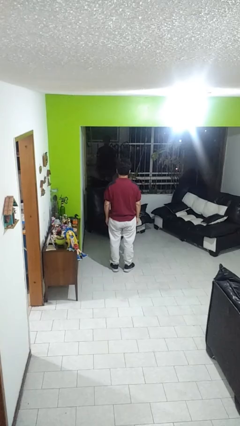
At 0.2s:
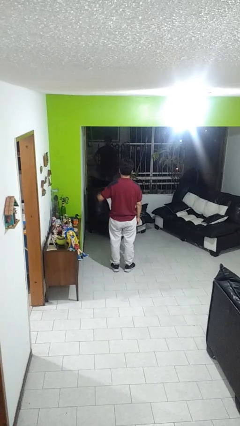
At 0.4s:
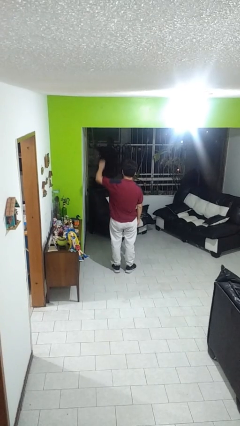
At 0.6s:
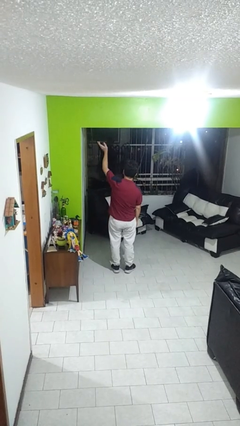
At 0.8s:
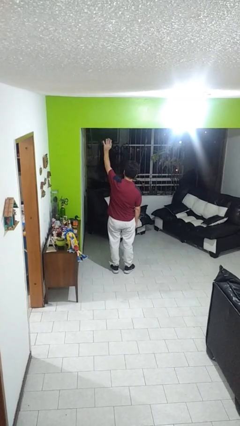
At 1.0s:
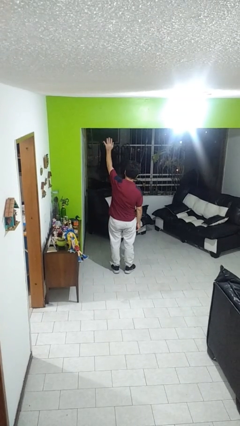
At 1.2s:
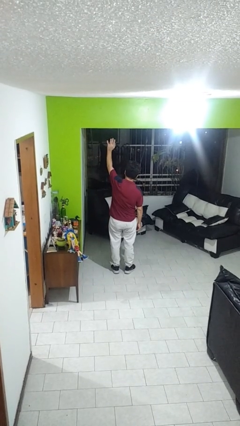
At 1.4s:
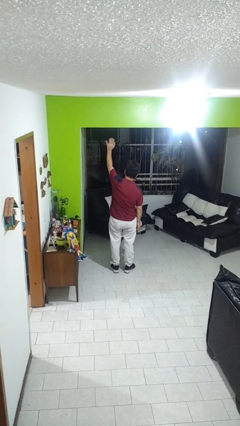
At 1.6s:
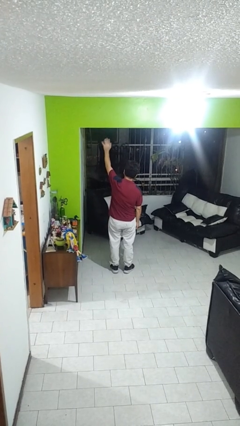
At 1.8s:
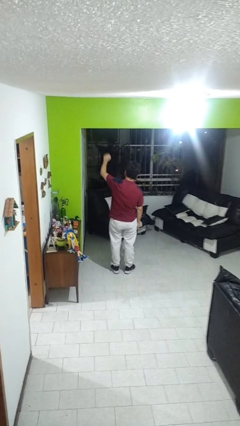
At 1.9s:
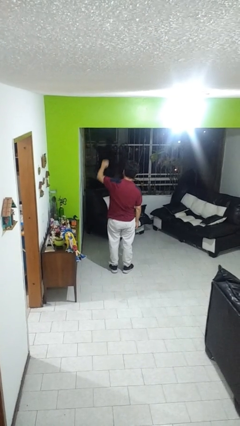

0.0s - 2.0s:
person waves at person

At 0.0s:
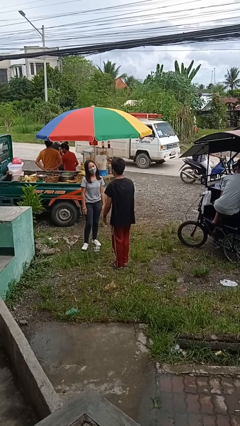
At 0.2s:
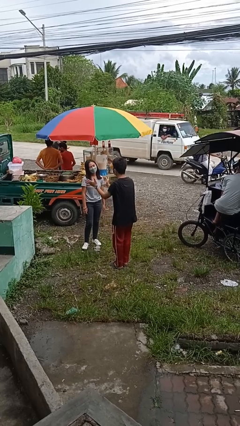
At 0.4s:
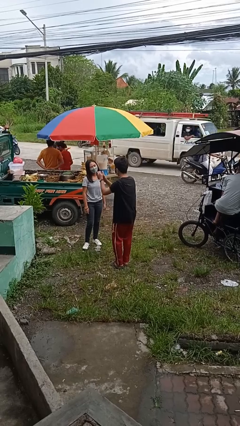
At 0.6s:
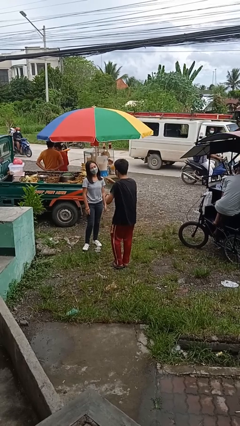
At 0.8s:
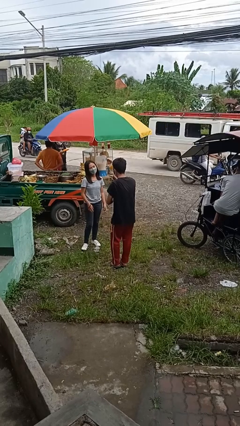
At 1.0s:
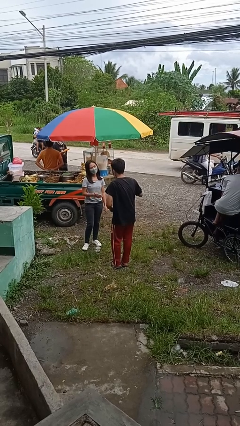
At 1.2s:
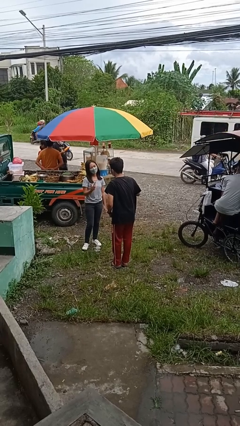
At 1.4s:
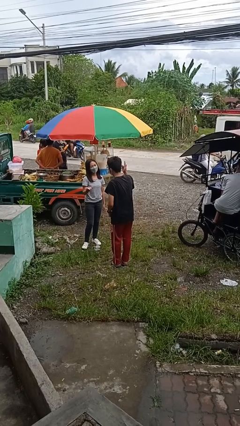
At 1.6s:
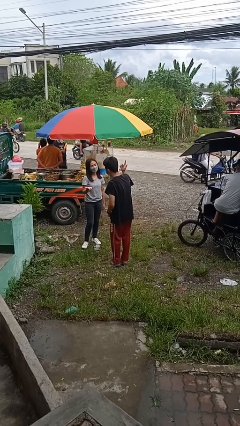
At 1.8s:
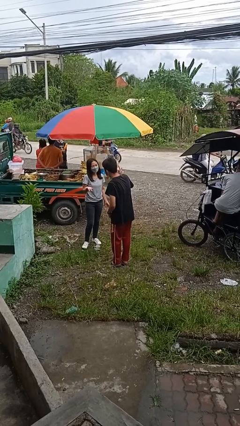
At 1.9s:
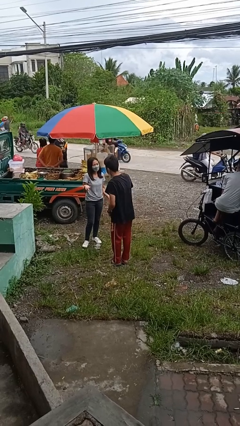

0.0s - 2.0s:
person talks to person

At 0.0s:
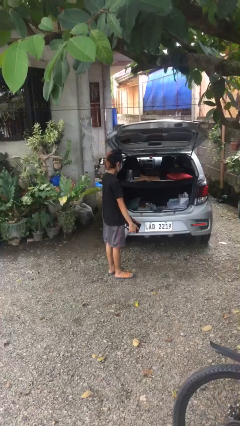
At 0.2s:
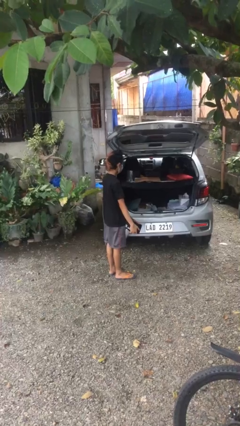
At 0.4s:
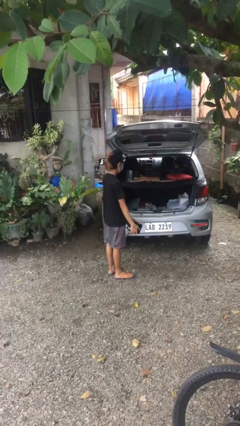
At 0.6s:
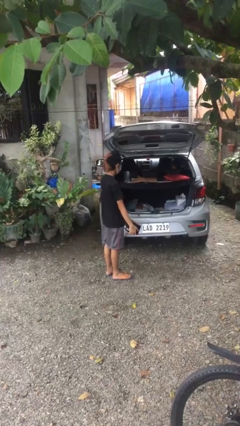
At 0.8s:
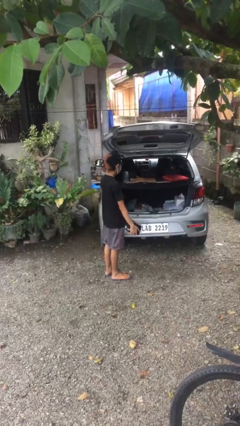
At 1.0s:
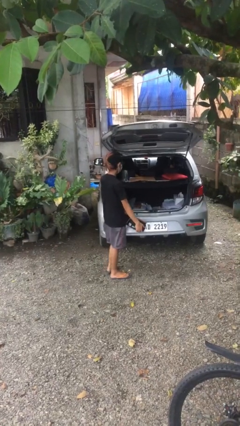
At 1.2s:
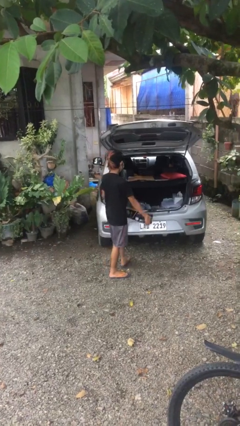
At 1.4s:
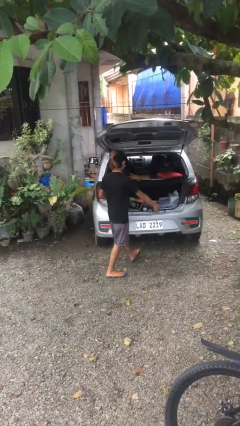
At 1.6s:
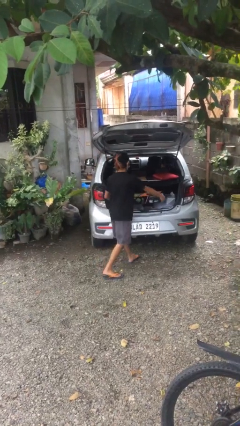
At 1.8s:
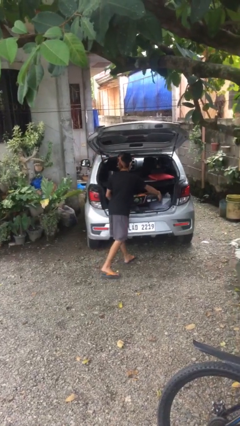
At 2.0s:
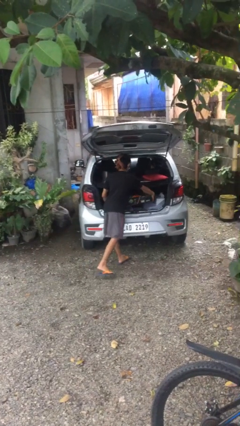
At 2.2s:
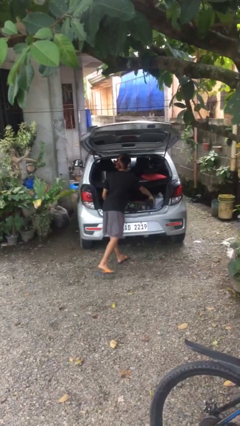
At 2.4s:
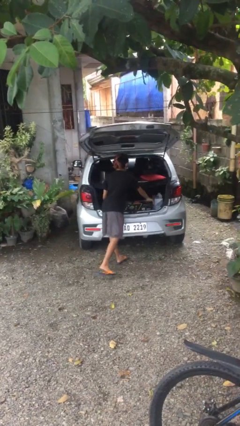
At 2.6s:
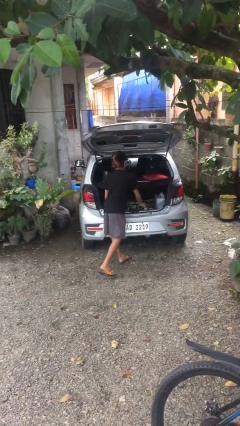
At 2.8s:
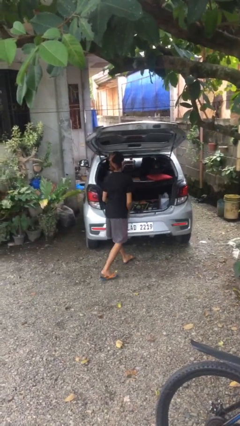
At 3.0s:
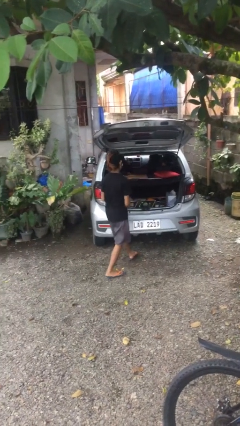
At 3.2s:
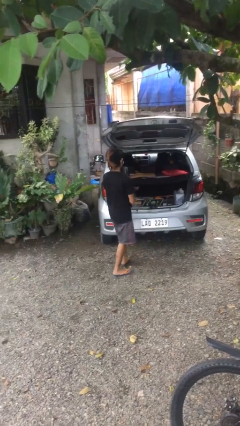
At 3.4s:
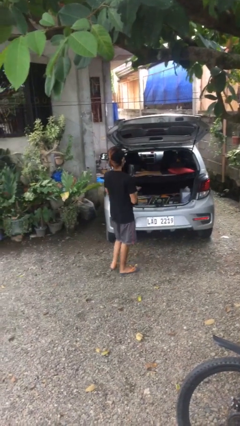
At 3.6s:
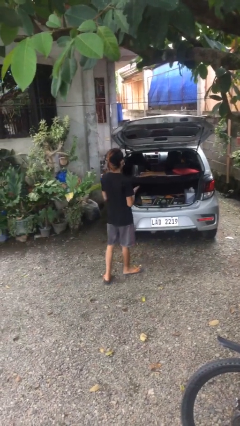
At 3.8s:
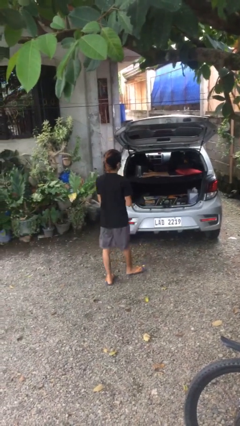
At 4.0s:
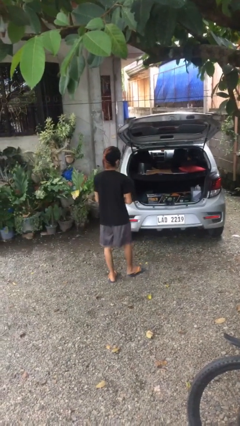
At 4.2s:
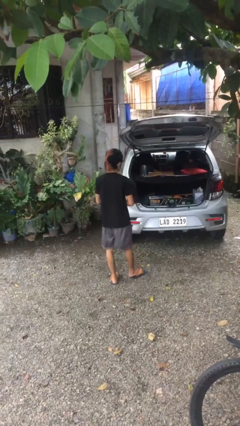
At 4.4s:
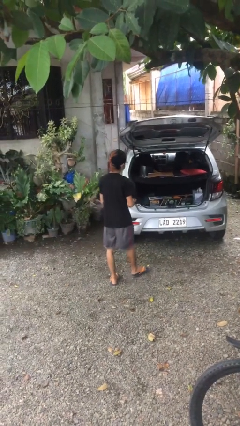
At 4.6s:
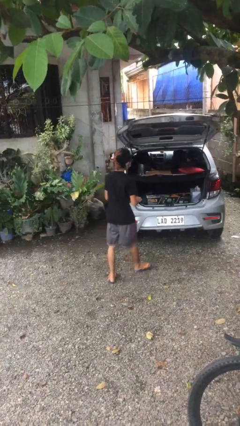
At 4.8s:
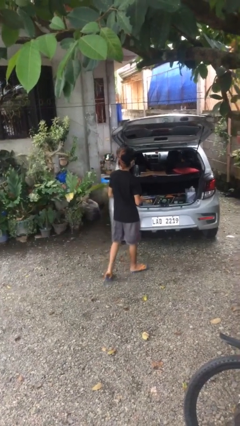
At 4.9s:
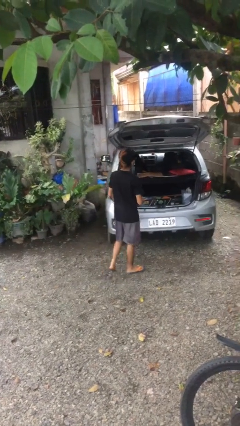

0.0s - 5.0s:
person loads car

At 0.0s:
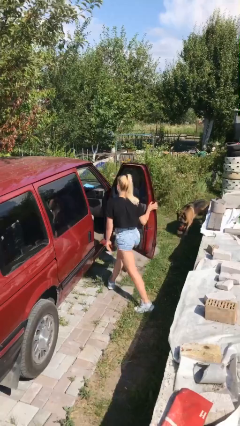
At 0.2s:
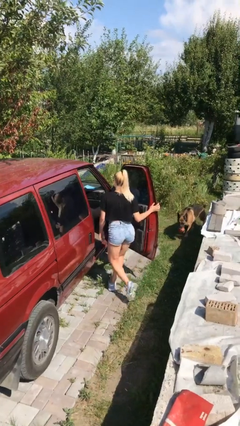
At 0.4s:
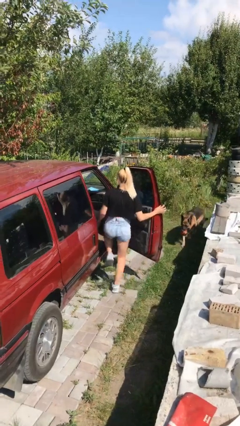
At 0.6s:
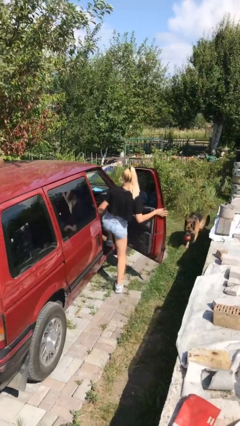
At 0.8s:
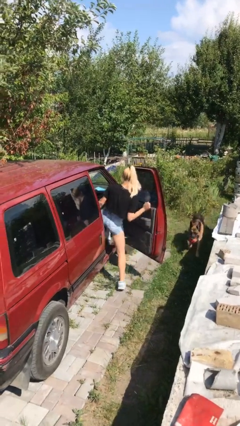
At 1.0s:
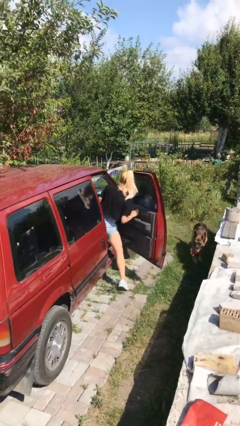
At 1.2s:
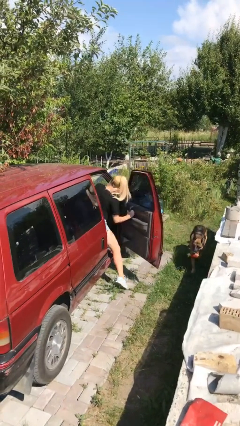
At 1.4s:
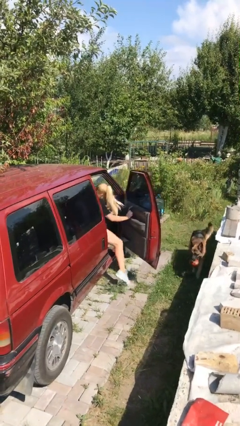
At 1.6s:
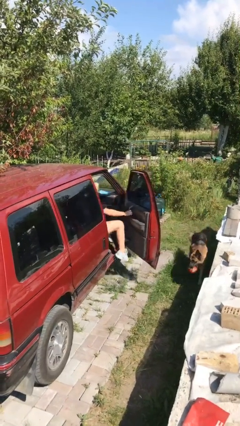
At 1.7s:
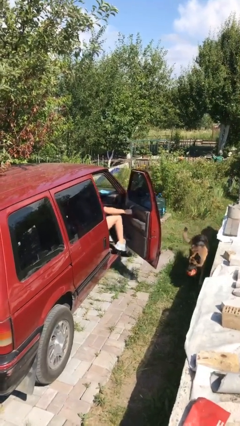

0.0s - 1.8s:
person exits car

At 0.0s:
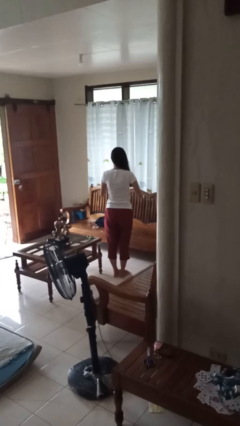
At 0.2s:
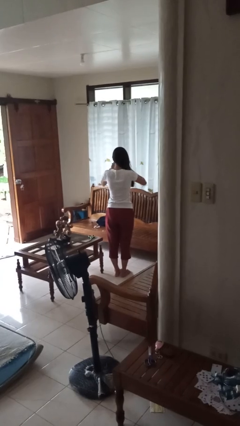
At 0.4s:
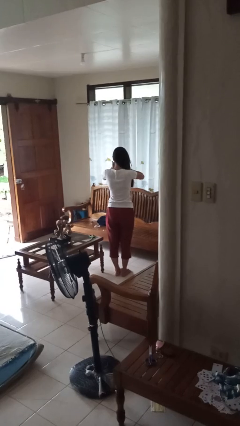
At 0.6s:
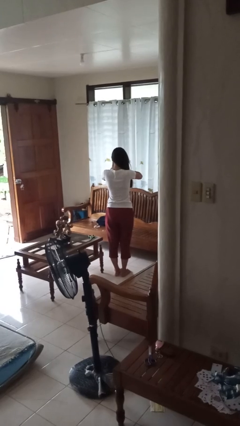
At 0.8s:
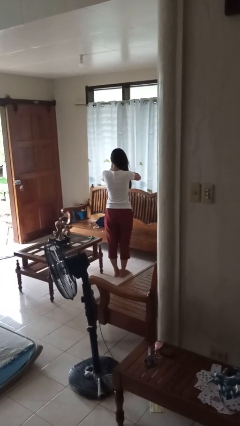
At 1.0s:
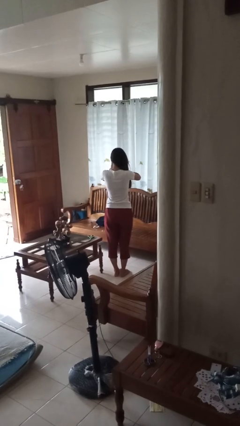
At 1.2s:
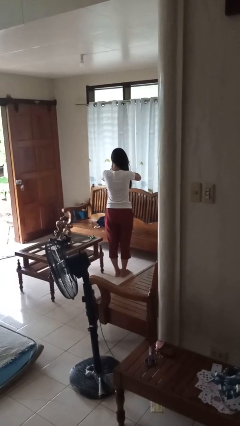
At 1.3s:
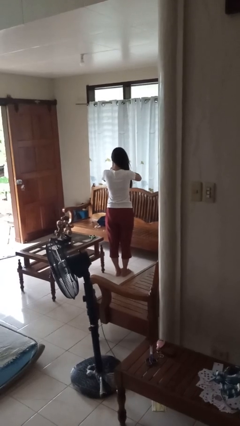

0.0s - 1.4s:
person covers face with hands

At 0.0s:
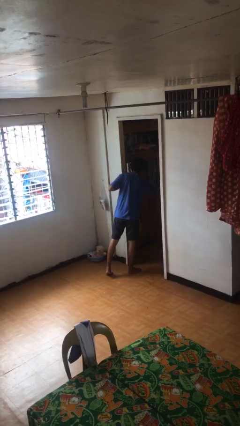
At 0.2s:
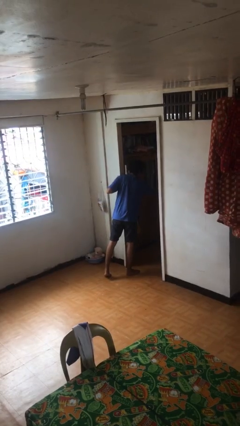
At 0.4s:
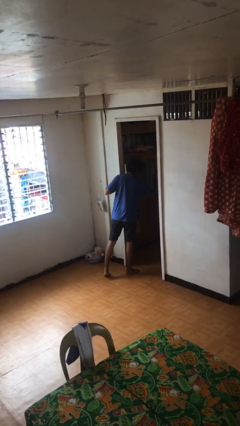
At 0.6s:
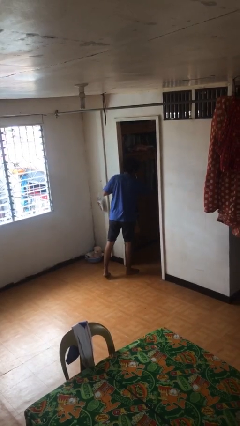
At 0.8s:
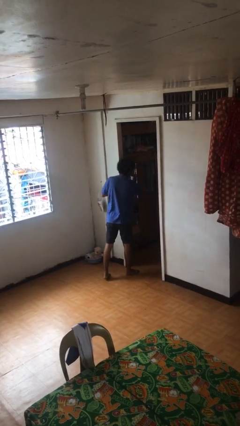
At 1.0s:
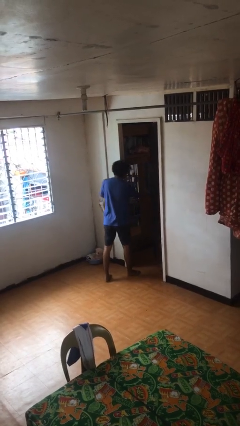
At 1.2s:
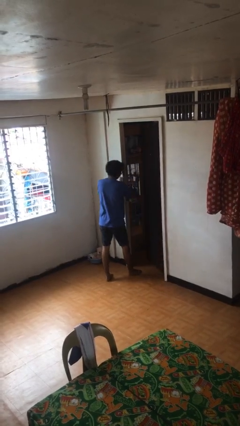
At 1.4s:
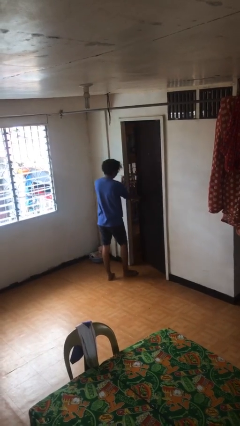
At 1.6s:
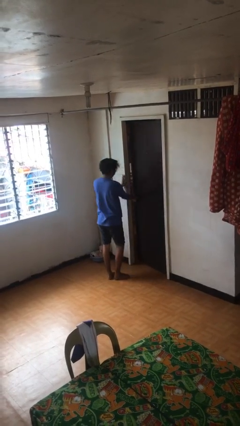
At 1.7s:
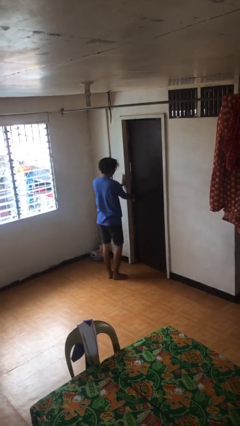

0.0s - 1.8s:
person closes facility door

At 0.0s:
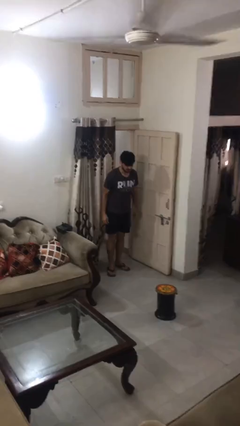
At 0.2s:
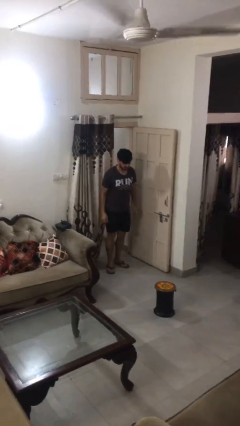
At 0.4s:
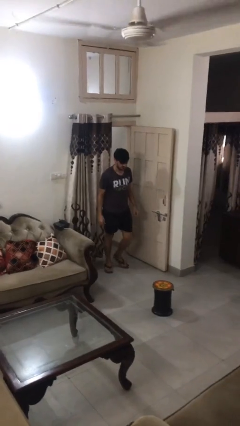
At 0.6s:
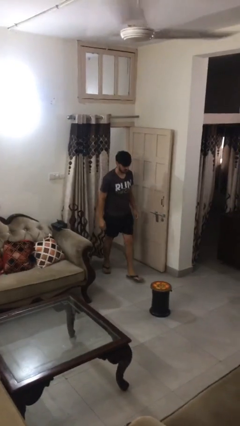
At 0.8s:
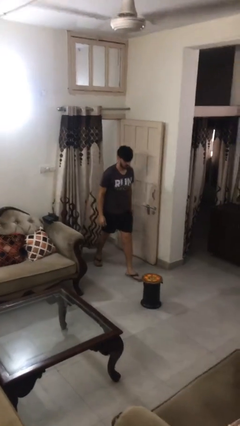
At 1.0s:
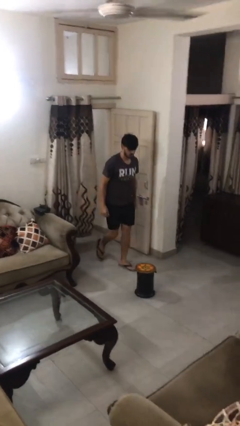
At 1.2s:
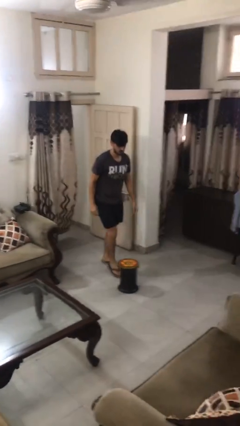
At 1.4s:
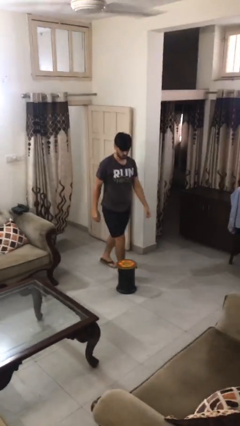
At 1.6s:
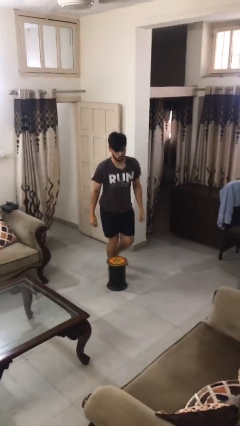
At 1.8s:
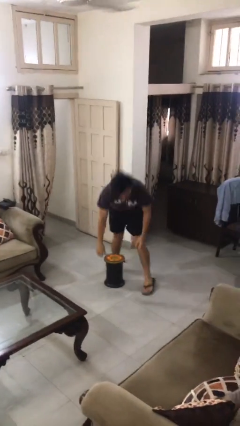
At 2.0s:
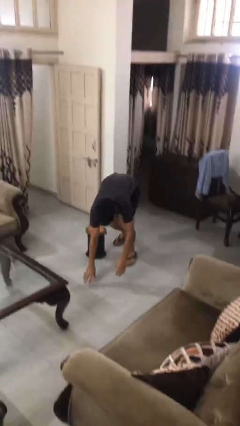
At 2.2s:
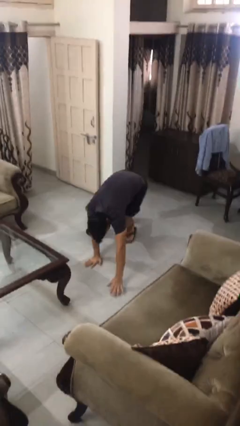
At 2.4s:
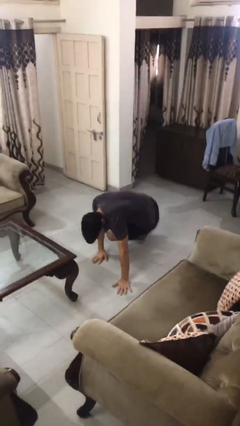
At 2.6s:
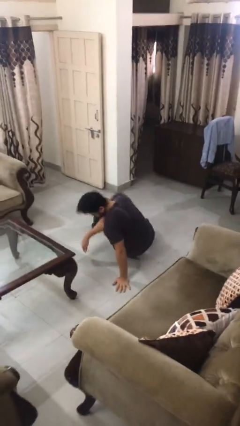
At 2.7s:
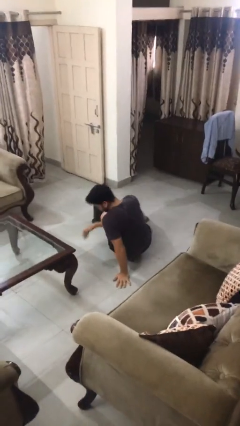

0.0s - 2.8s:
person trips on object on floor

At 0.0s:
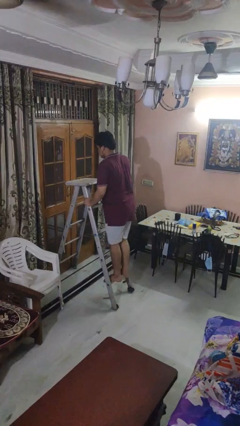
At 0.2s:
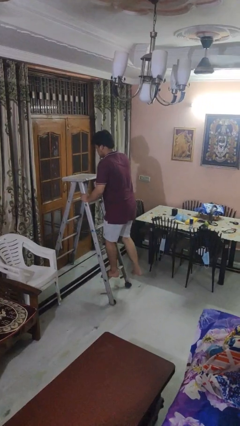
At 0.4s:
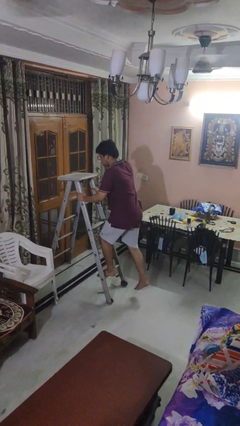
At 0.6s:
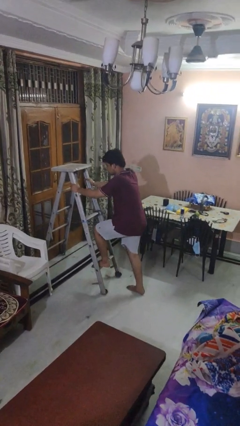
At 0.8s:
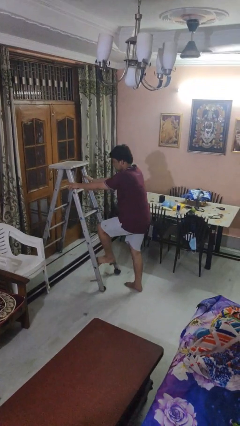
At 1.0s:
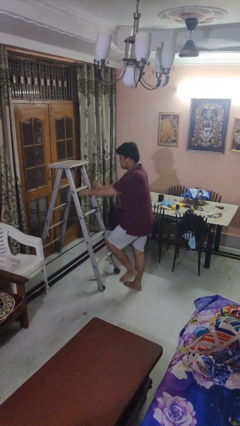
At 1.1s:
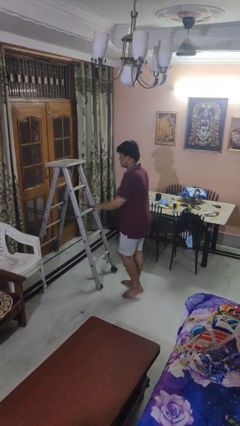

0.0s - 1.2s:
person climbs down ladder
